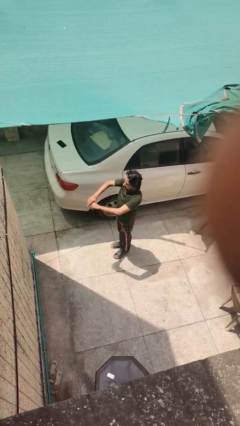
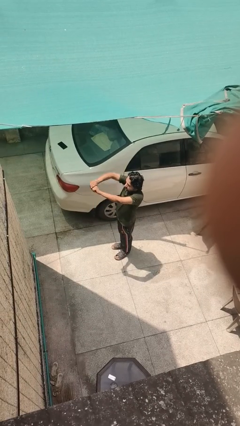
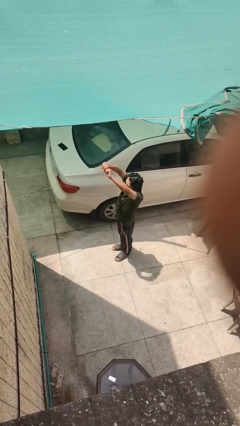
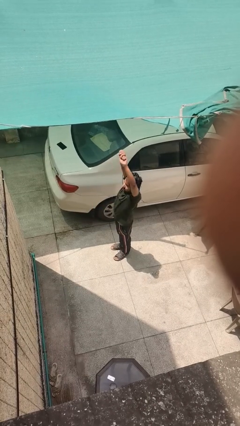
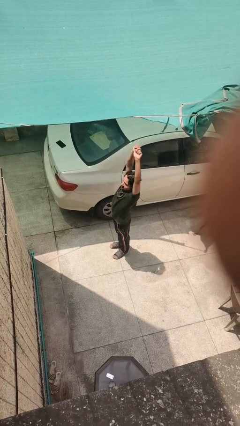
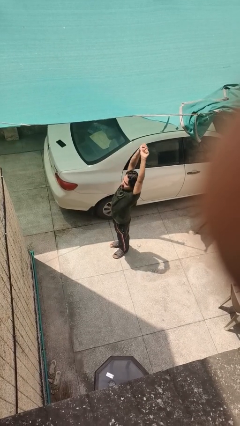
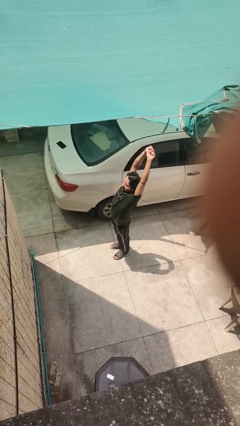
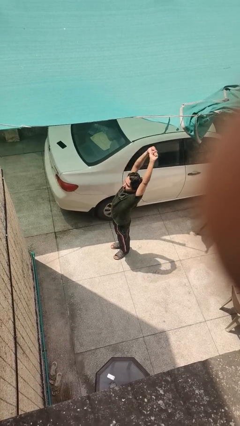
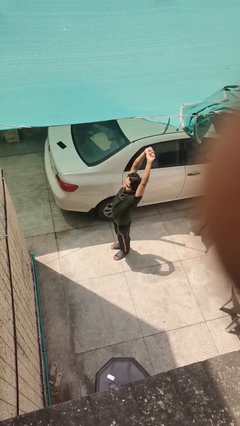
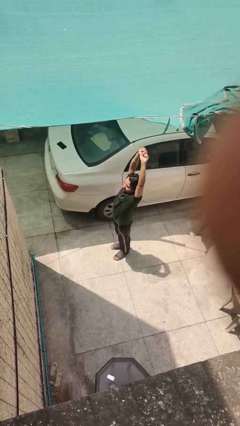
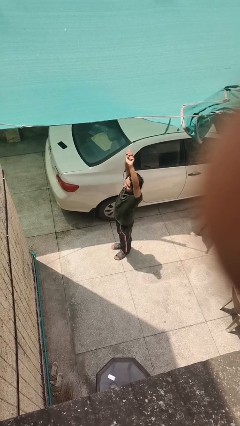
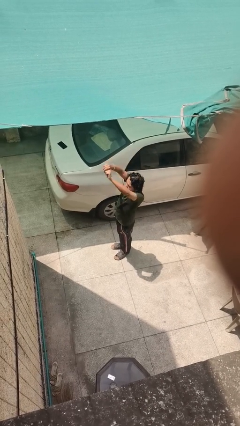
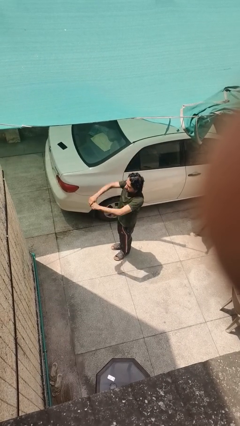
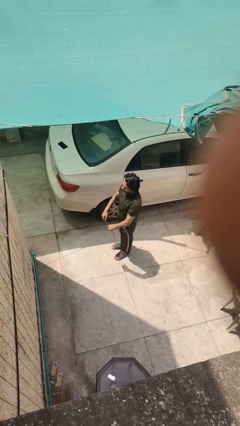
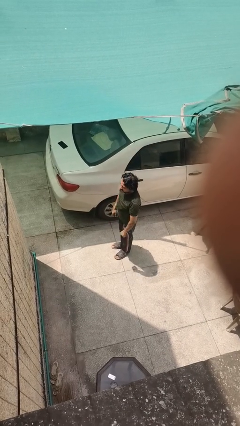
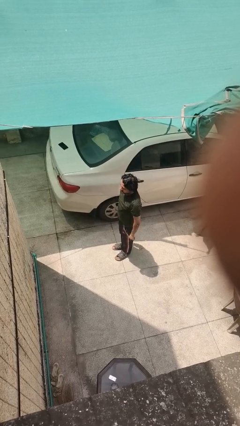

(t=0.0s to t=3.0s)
person stretches arms over head

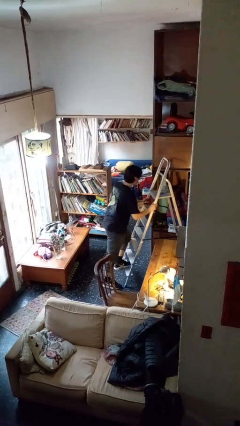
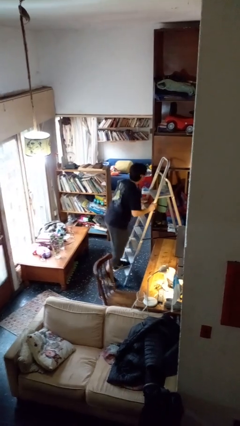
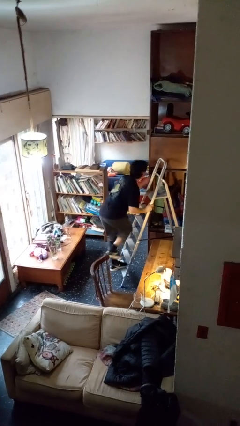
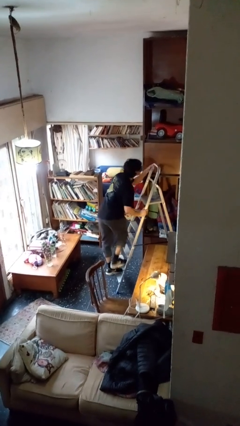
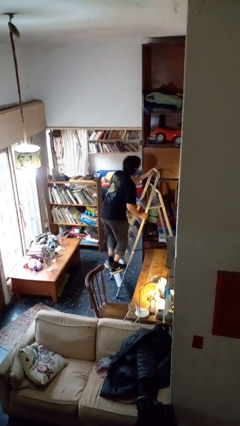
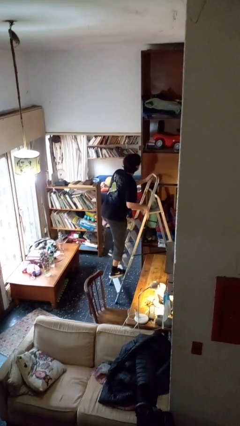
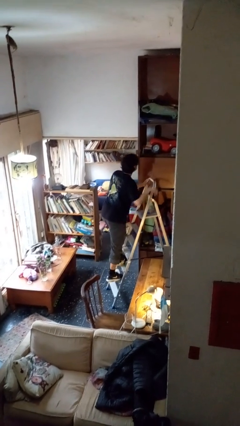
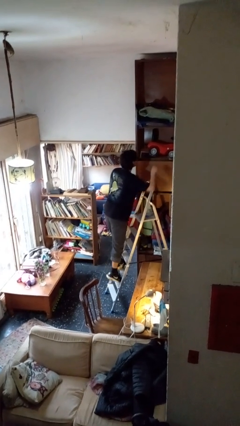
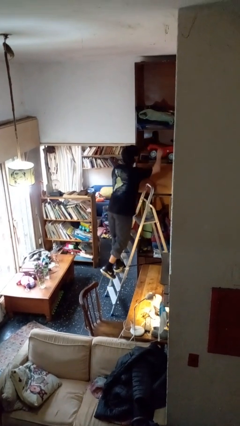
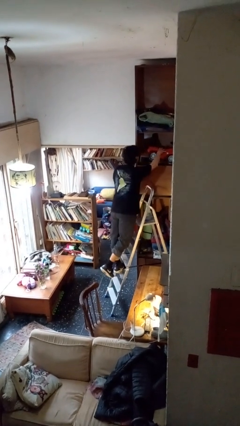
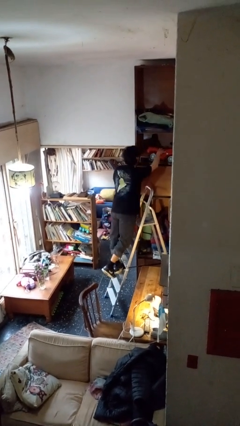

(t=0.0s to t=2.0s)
person climbs up ladder

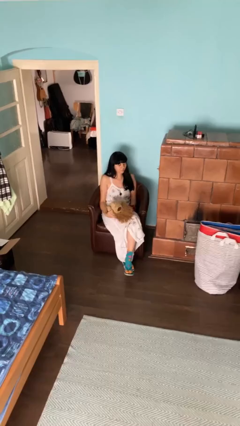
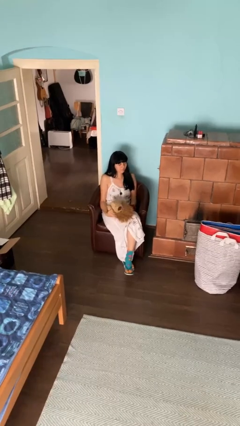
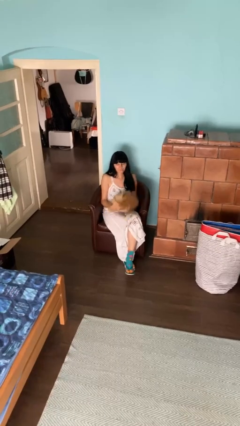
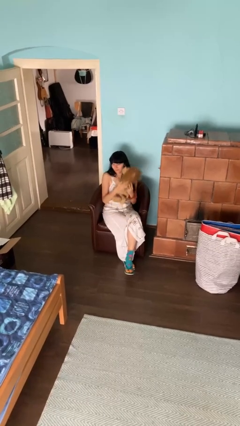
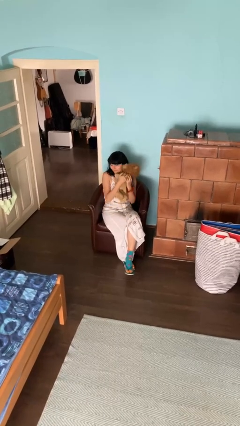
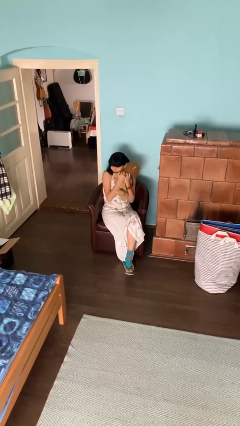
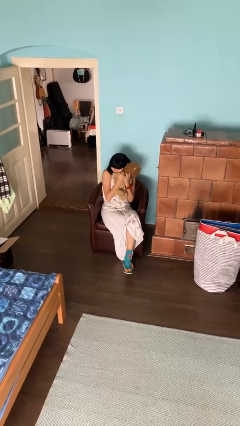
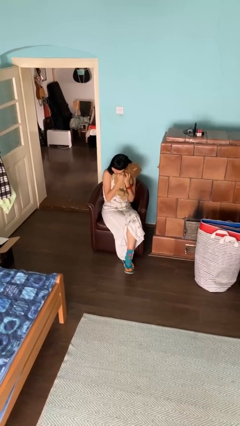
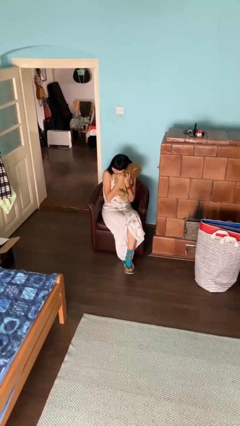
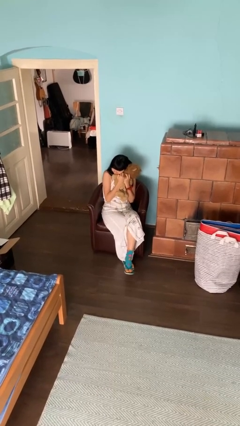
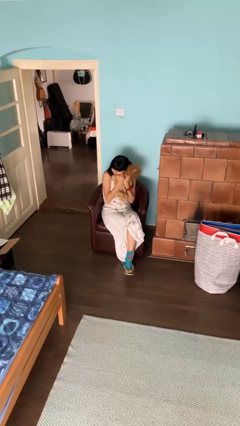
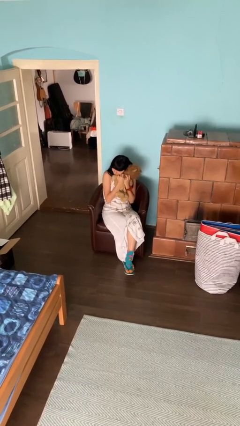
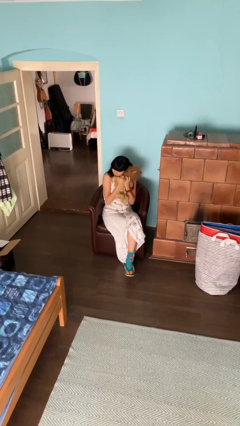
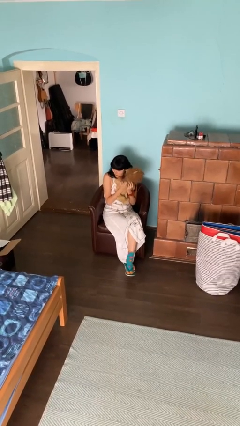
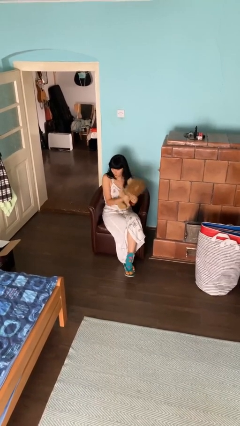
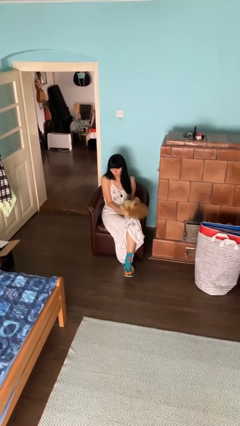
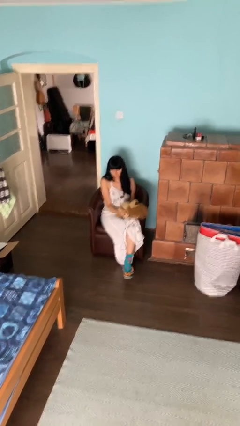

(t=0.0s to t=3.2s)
person hugs stuffed animal

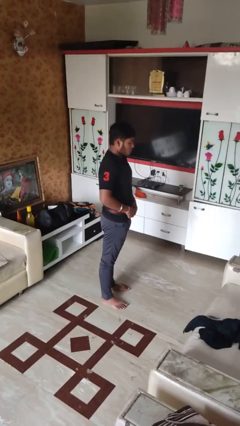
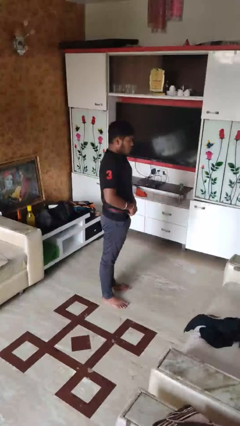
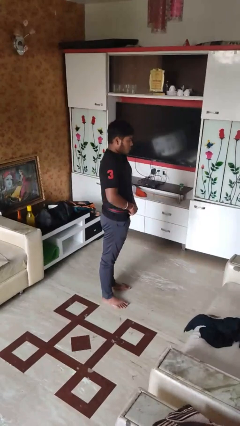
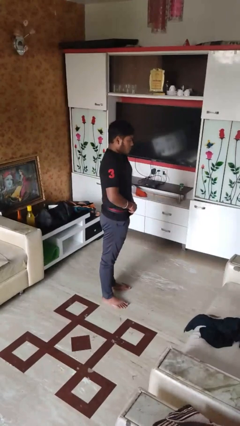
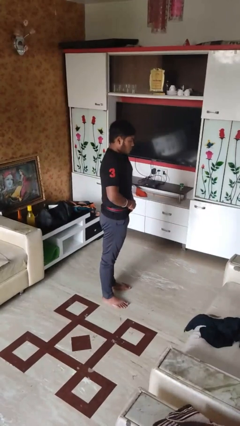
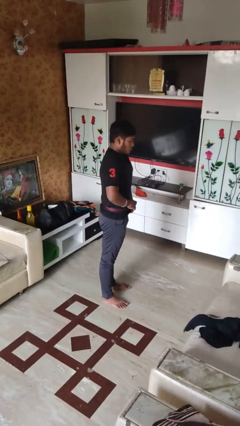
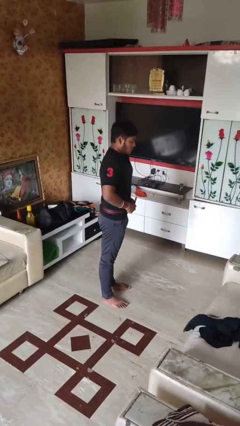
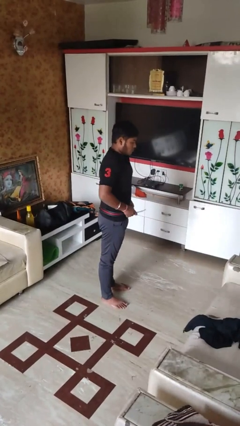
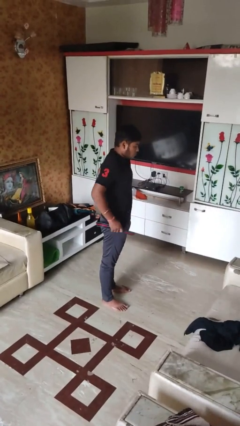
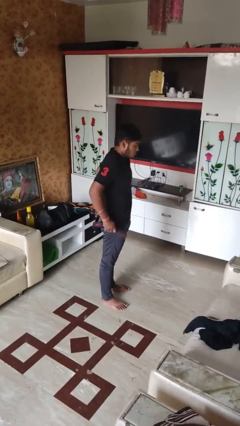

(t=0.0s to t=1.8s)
person takes off belt

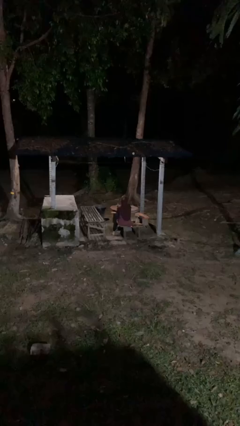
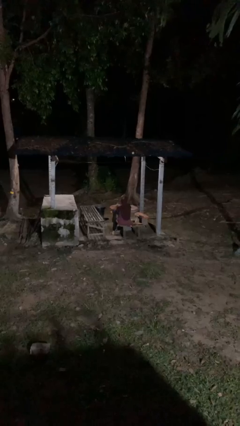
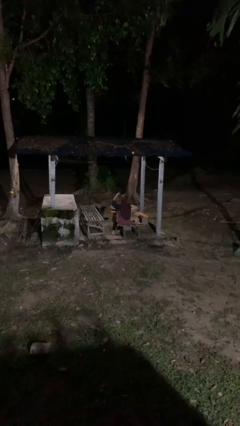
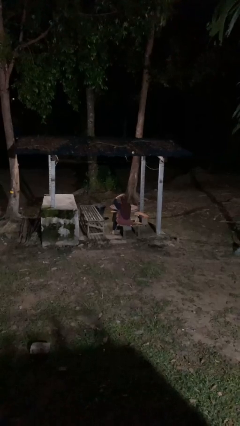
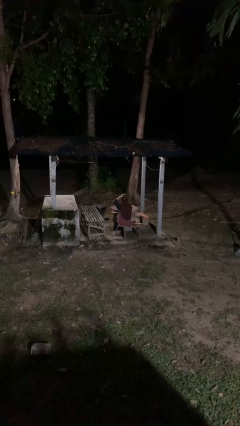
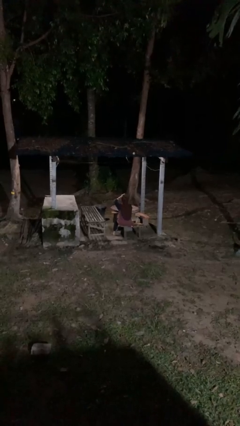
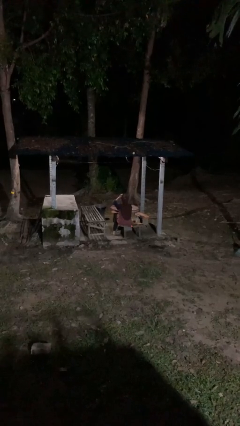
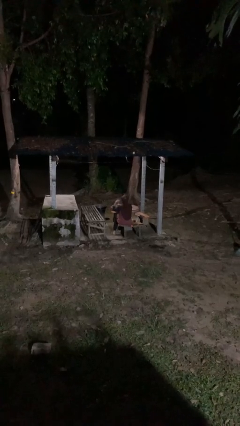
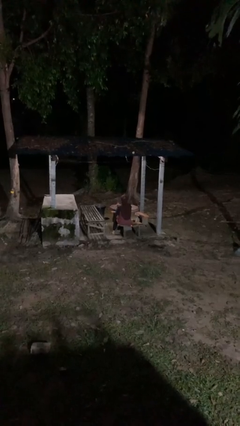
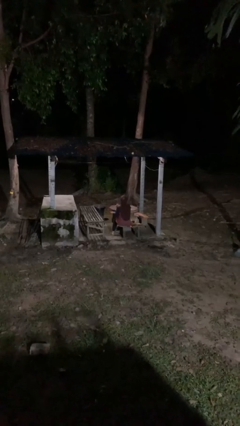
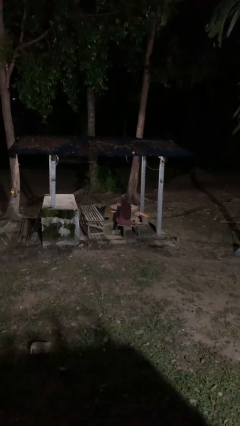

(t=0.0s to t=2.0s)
person pats head

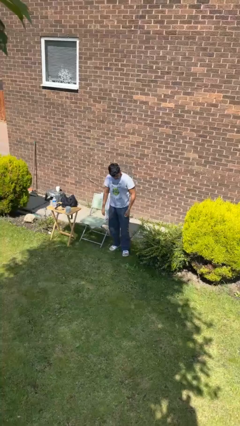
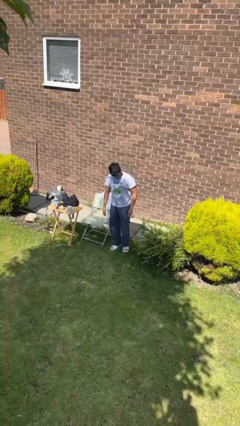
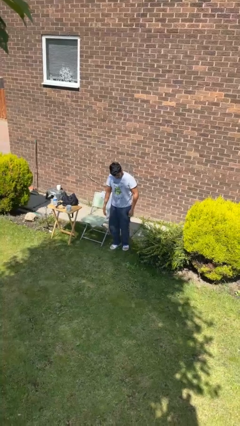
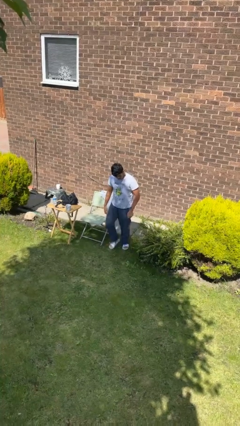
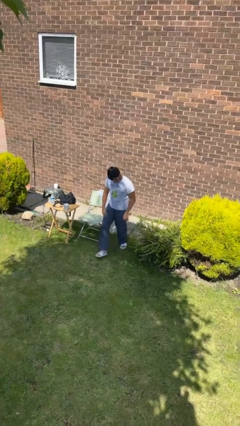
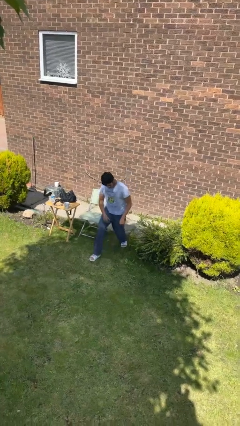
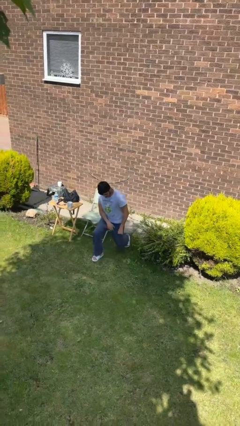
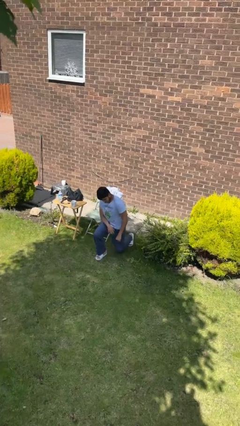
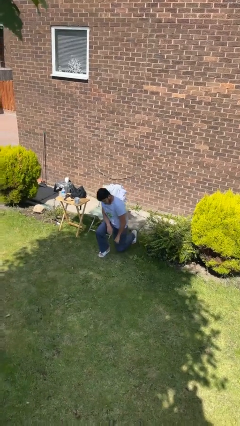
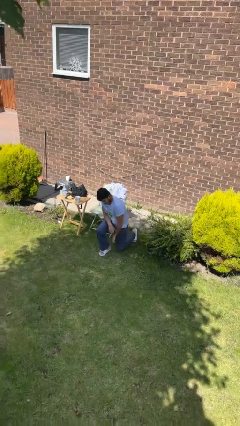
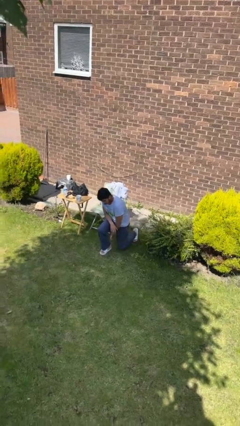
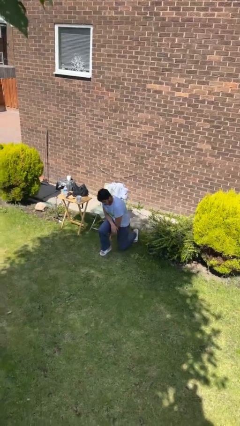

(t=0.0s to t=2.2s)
person kneels

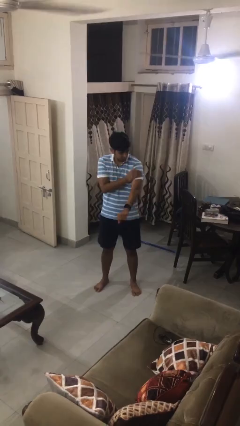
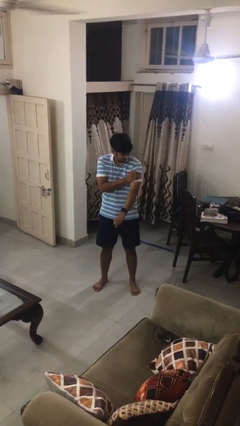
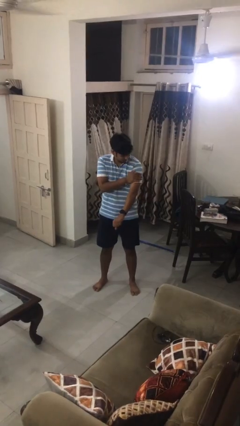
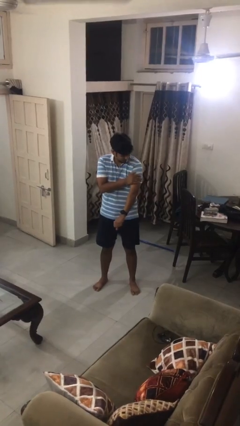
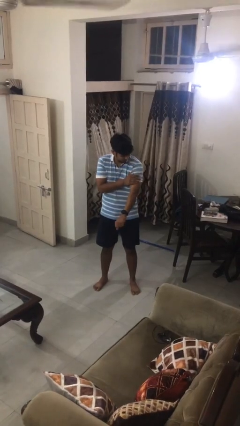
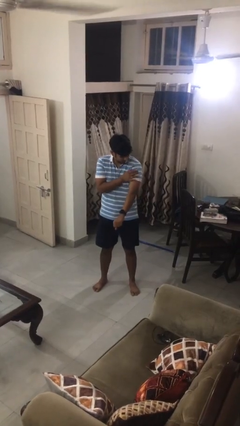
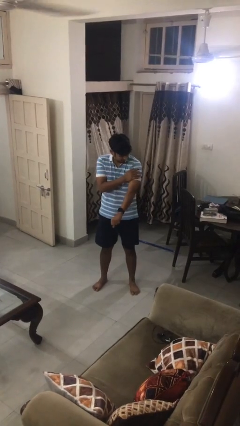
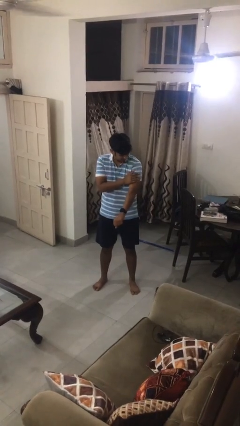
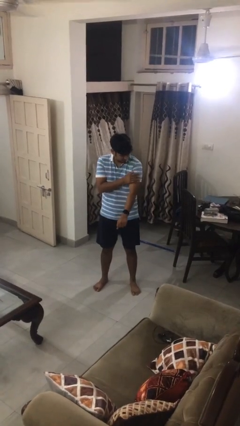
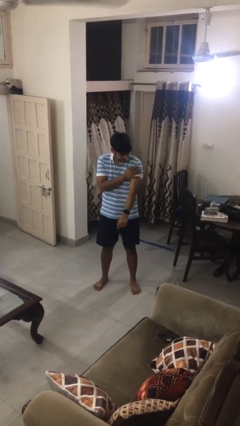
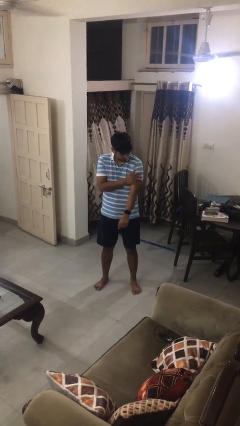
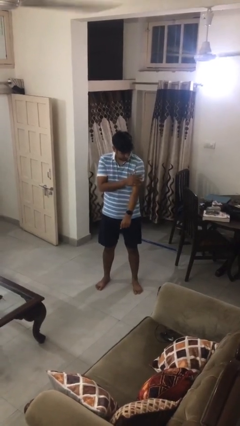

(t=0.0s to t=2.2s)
person swats bug

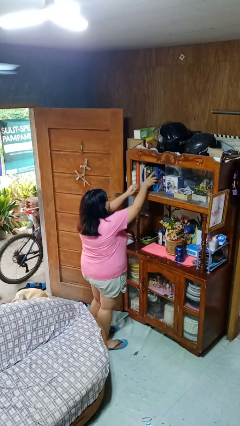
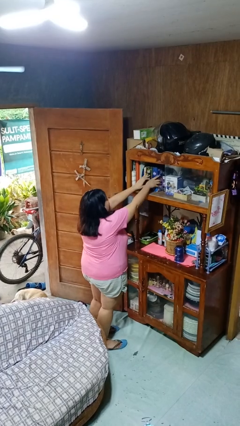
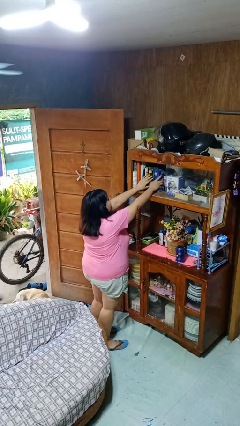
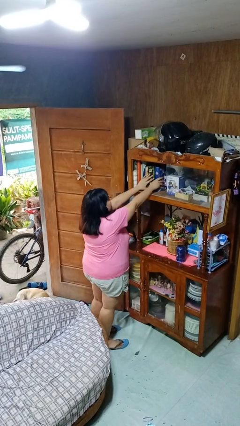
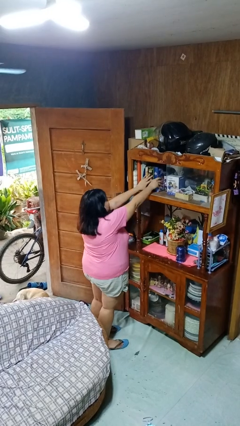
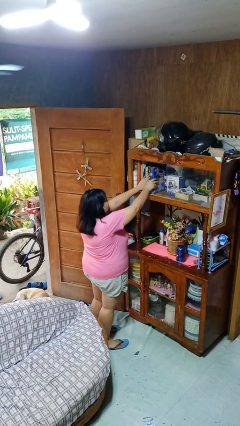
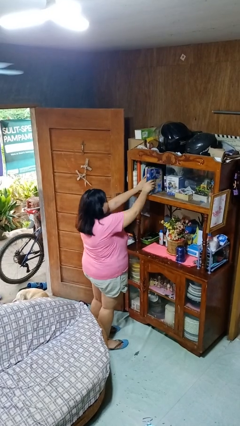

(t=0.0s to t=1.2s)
person picks up object from shelf
